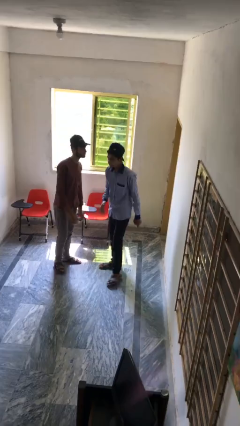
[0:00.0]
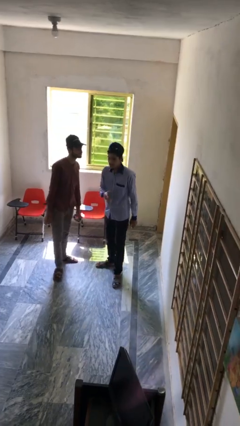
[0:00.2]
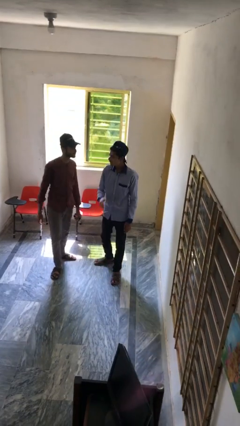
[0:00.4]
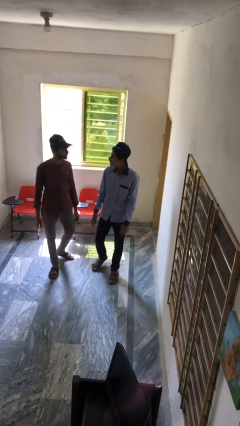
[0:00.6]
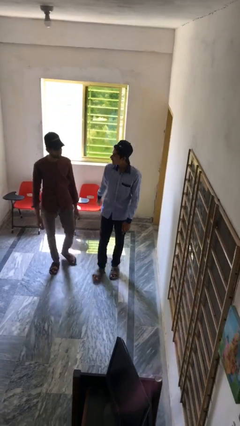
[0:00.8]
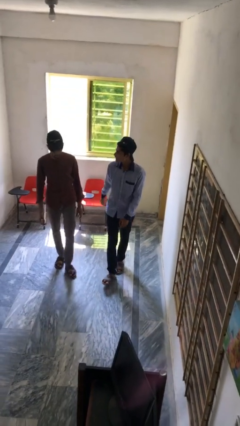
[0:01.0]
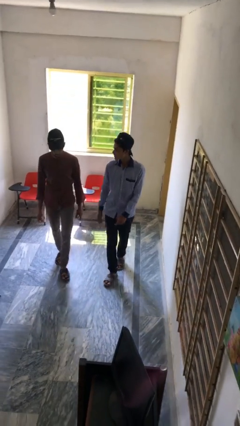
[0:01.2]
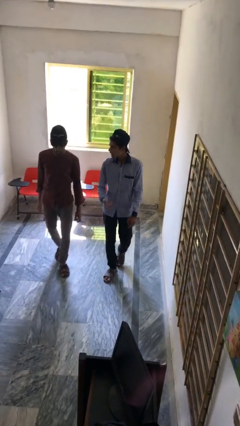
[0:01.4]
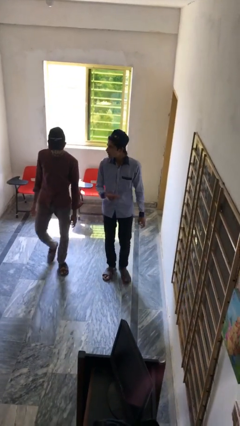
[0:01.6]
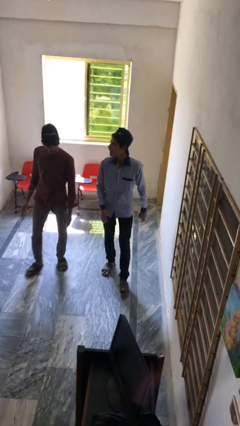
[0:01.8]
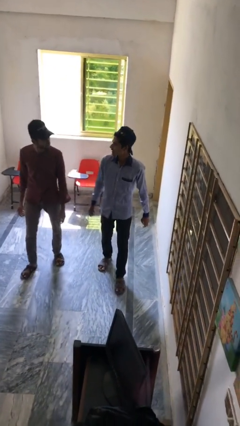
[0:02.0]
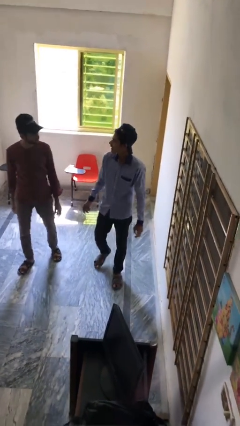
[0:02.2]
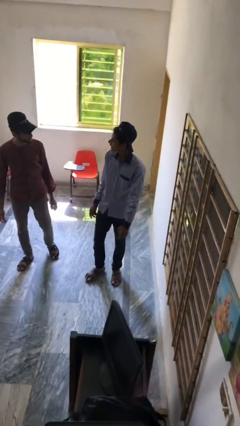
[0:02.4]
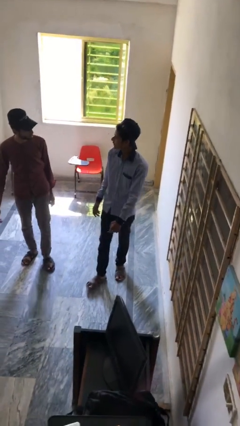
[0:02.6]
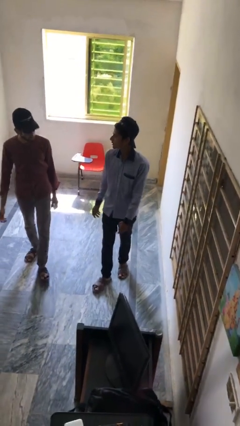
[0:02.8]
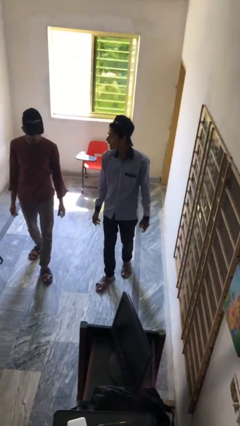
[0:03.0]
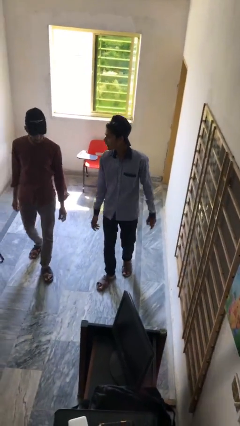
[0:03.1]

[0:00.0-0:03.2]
person talks to person

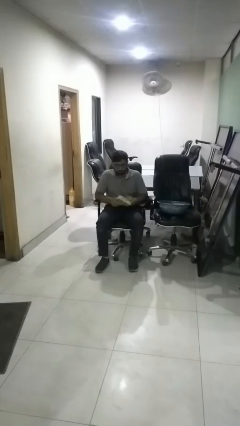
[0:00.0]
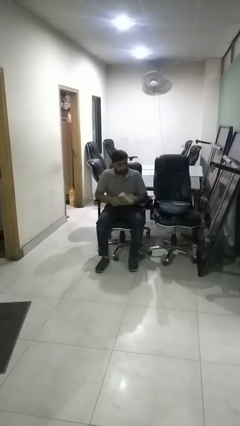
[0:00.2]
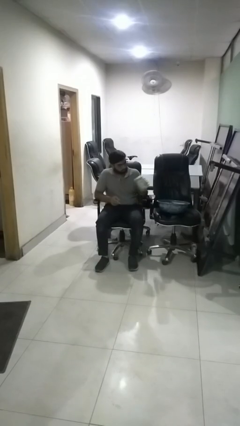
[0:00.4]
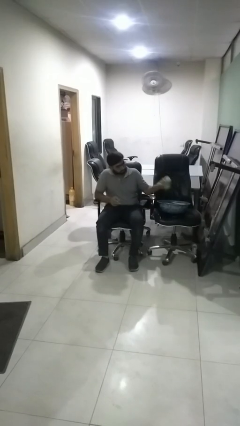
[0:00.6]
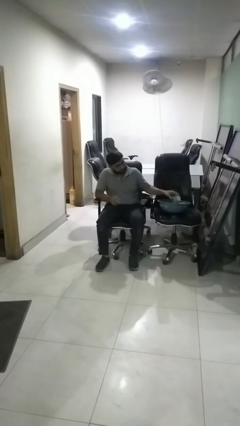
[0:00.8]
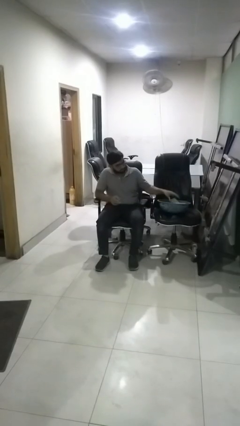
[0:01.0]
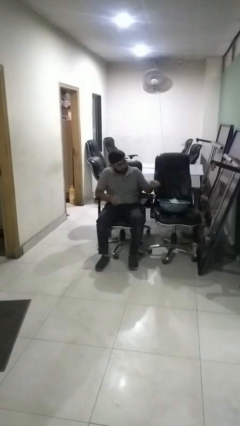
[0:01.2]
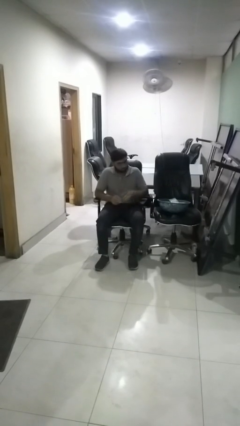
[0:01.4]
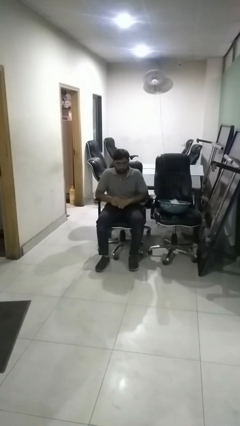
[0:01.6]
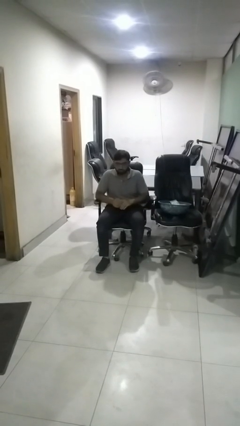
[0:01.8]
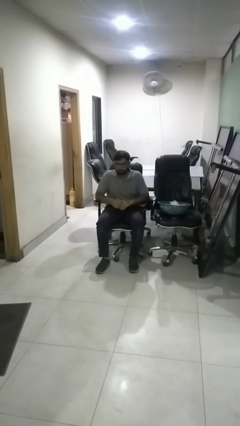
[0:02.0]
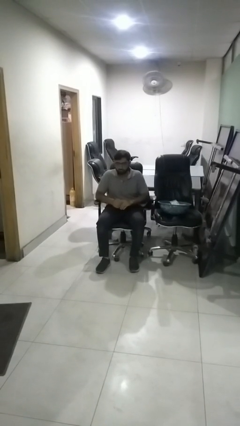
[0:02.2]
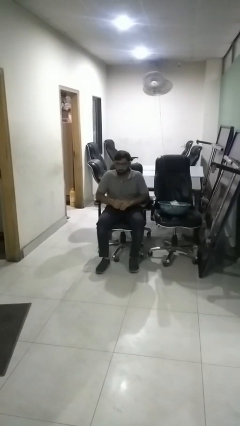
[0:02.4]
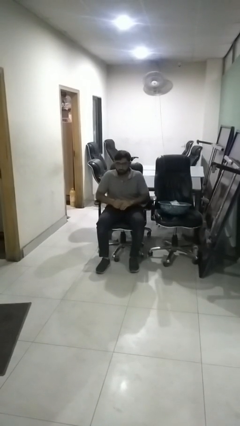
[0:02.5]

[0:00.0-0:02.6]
person puts object into basket

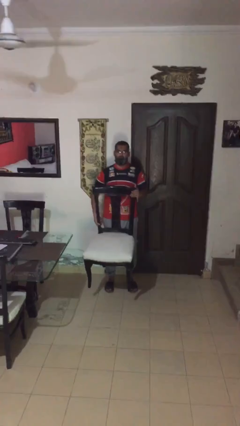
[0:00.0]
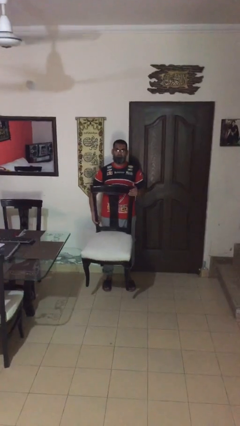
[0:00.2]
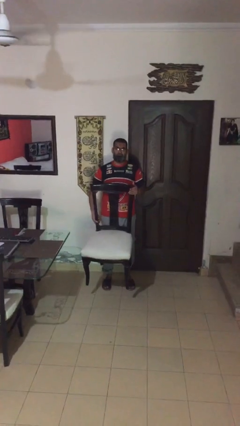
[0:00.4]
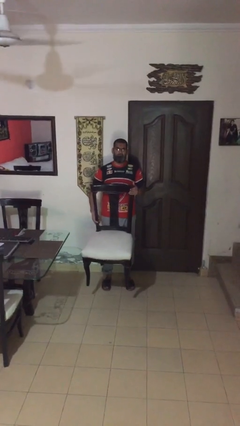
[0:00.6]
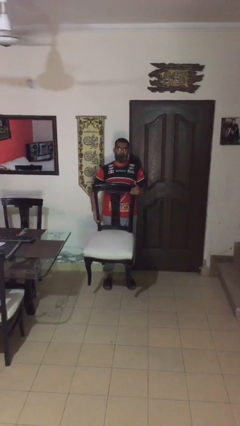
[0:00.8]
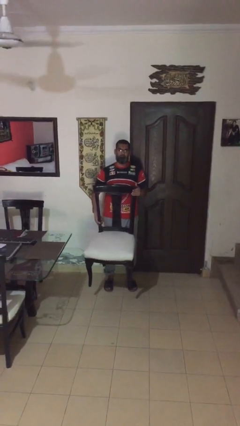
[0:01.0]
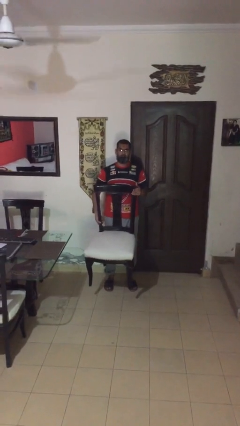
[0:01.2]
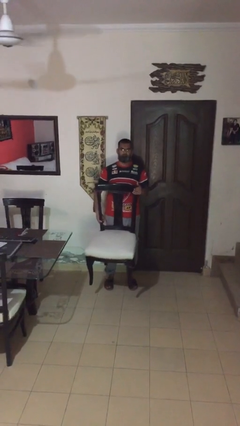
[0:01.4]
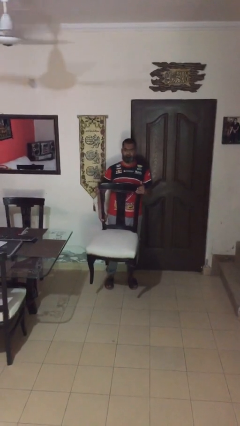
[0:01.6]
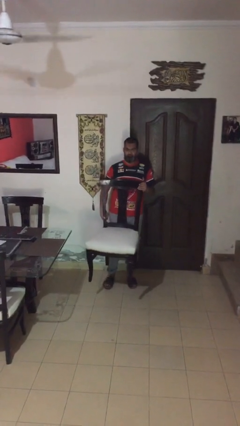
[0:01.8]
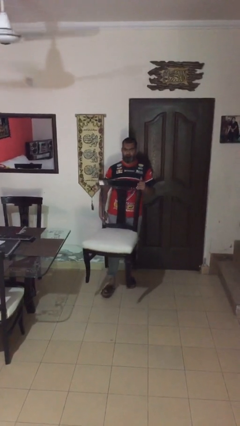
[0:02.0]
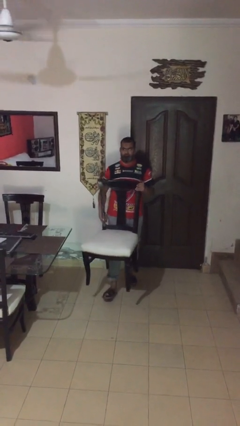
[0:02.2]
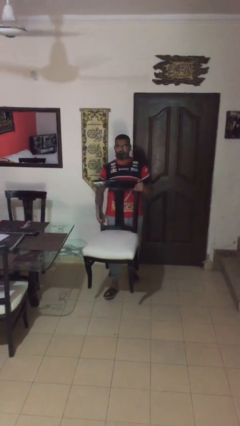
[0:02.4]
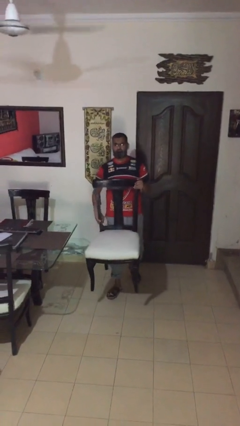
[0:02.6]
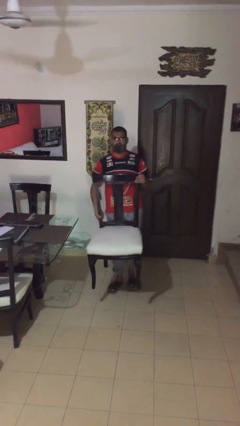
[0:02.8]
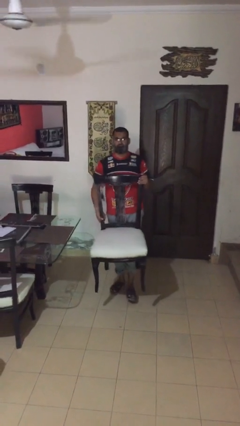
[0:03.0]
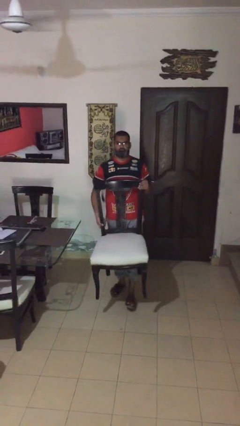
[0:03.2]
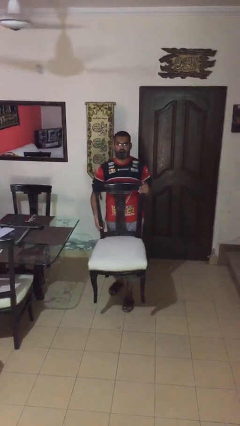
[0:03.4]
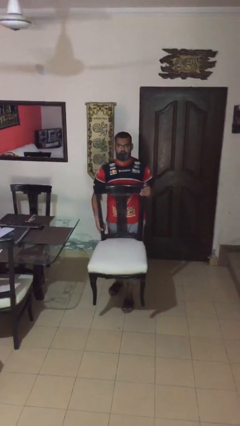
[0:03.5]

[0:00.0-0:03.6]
person carries heavy object

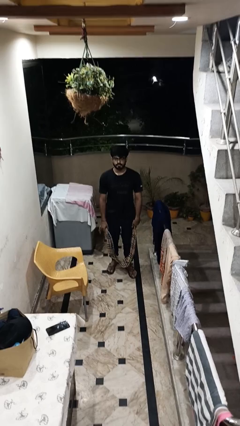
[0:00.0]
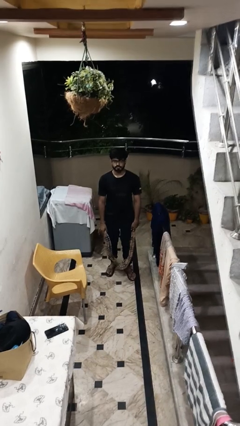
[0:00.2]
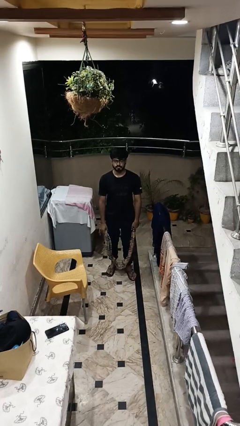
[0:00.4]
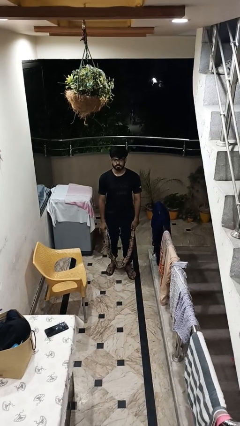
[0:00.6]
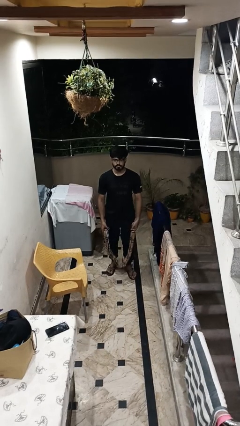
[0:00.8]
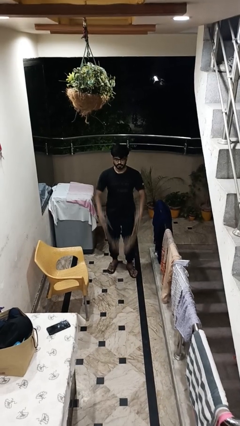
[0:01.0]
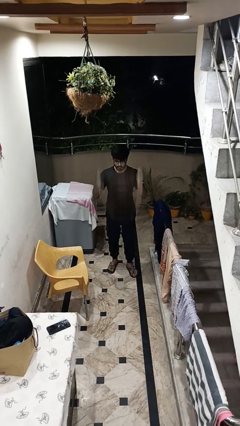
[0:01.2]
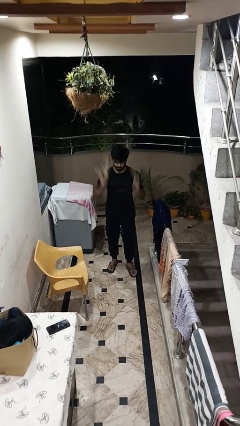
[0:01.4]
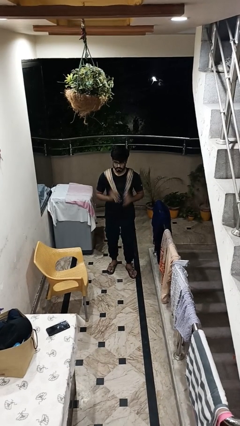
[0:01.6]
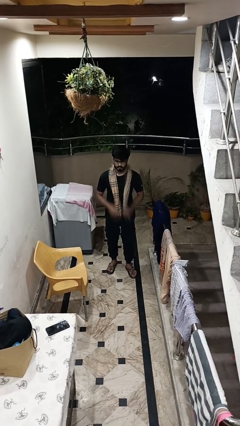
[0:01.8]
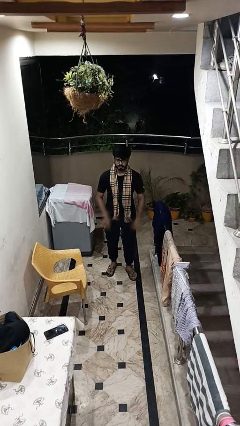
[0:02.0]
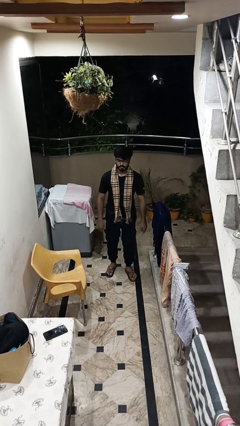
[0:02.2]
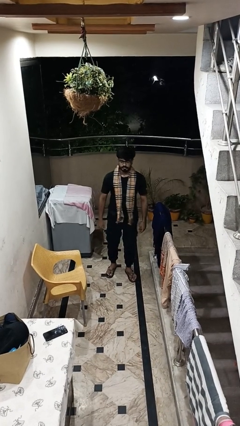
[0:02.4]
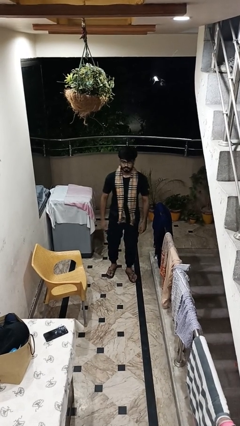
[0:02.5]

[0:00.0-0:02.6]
person puts on scarf

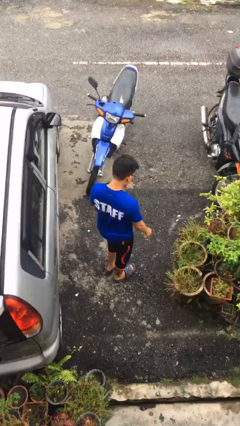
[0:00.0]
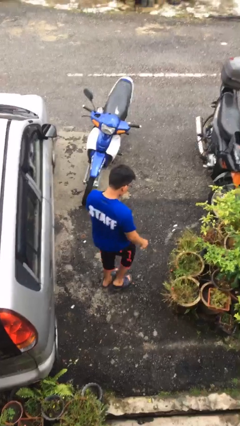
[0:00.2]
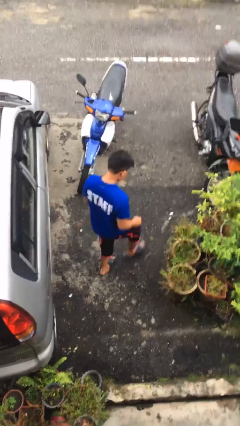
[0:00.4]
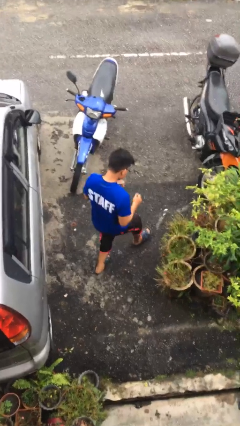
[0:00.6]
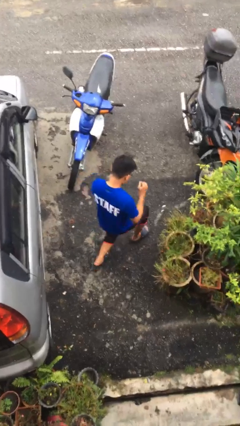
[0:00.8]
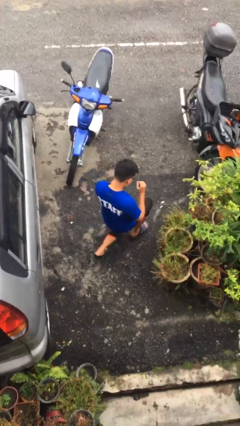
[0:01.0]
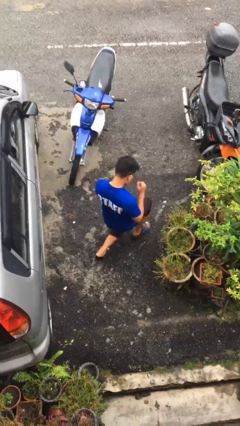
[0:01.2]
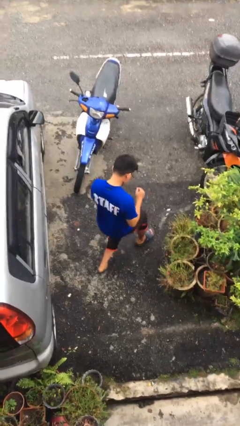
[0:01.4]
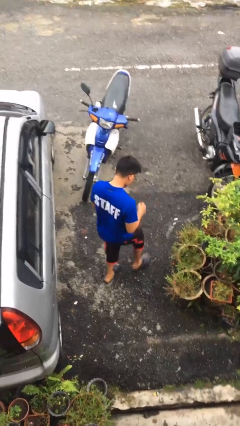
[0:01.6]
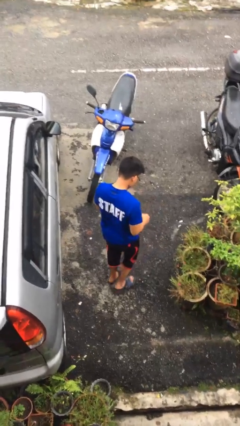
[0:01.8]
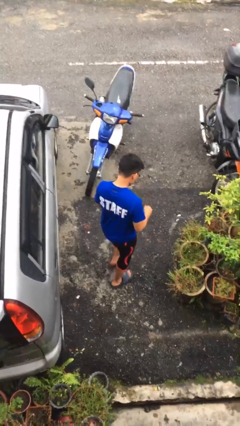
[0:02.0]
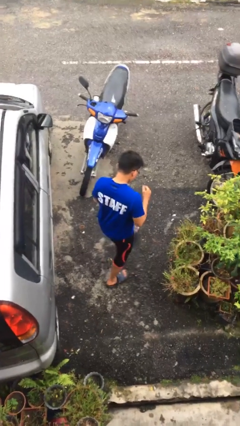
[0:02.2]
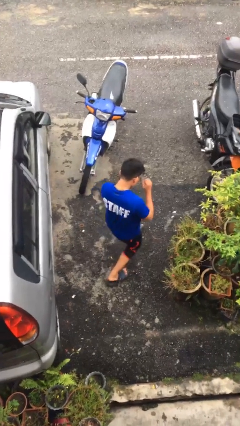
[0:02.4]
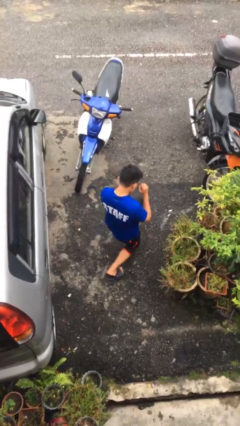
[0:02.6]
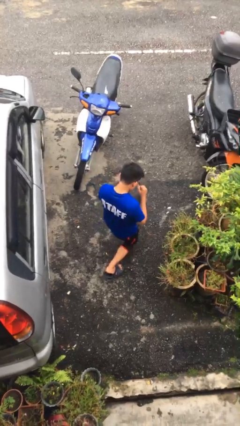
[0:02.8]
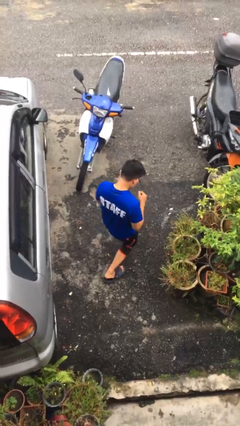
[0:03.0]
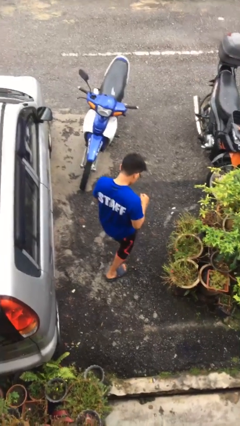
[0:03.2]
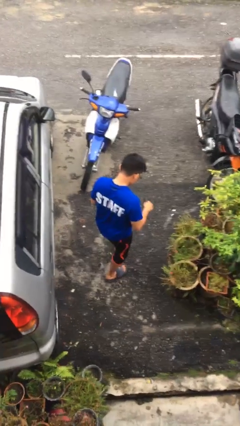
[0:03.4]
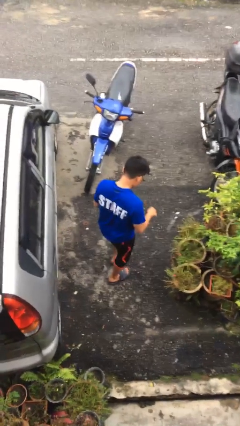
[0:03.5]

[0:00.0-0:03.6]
person exercises with lunges

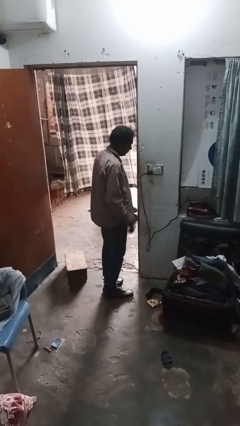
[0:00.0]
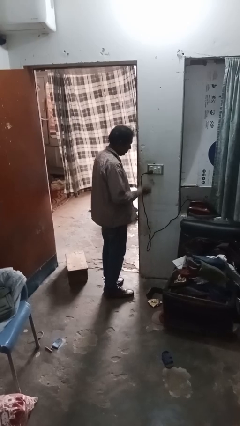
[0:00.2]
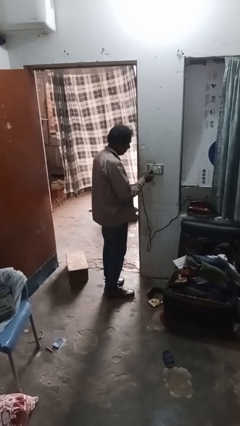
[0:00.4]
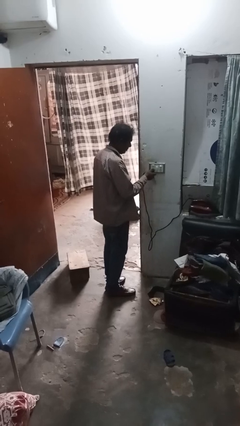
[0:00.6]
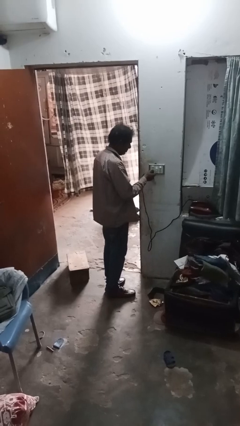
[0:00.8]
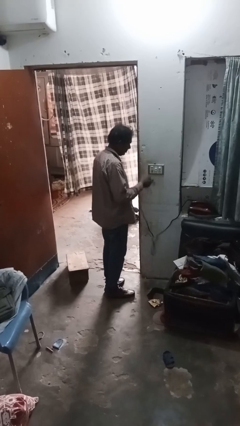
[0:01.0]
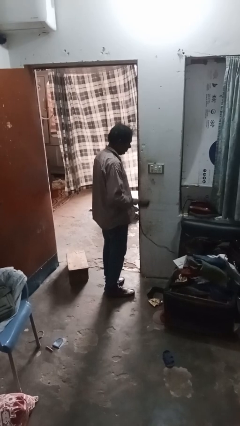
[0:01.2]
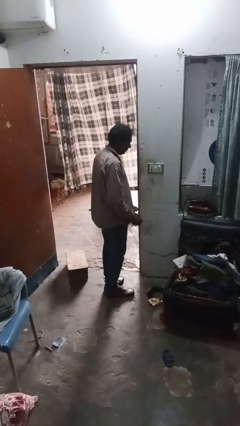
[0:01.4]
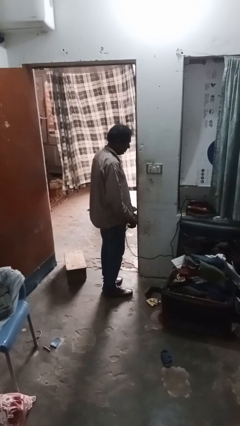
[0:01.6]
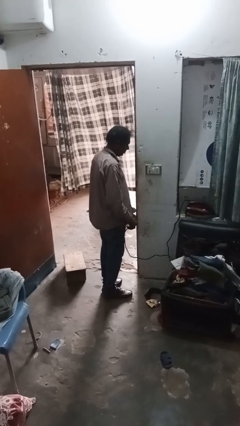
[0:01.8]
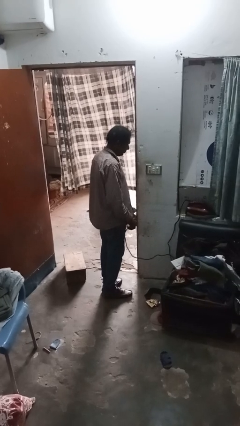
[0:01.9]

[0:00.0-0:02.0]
person unplugs from electrical socket
